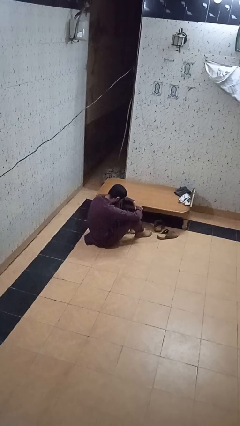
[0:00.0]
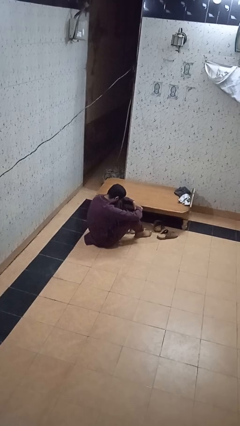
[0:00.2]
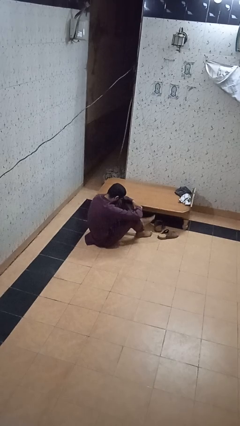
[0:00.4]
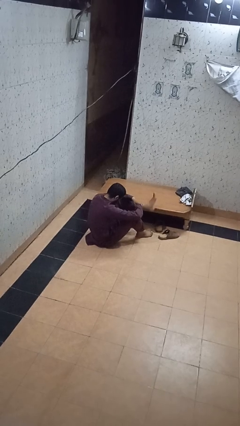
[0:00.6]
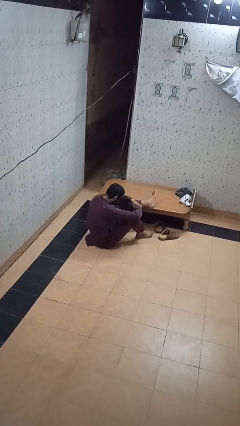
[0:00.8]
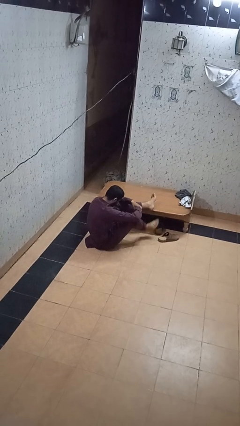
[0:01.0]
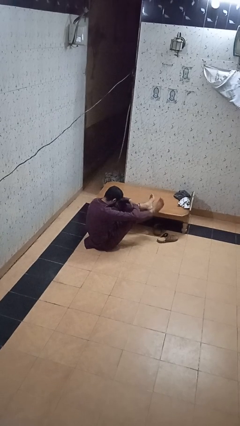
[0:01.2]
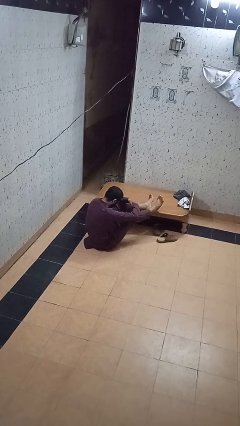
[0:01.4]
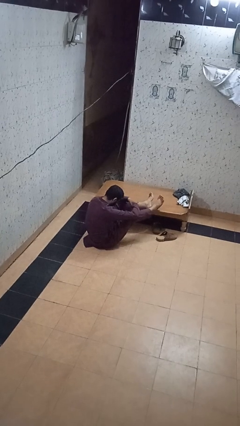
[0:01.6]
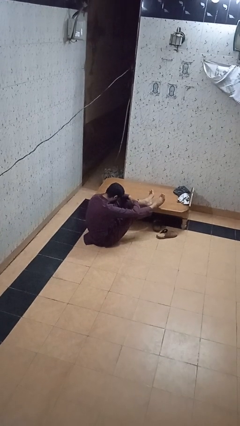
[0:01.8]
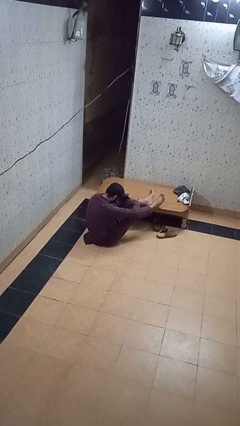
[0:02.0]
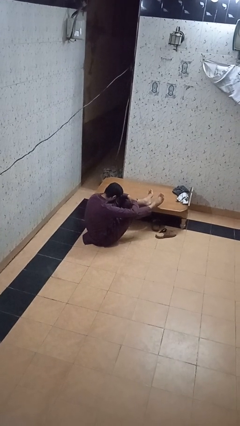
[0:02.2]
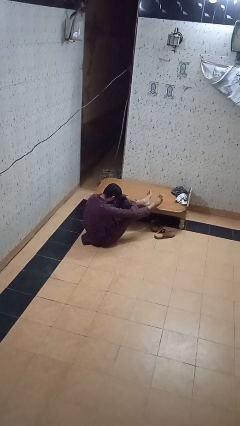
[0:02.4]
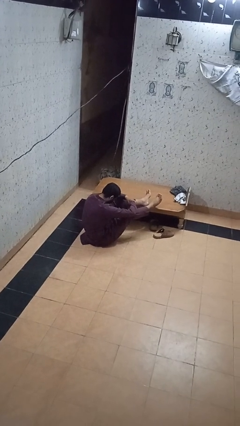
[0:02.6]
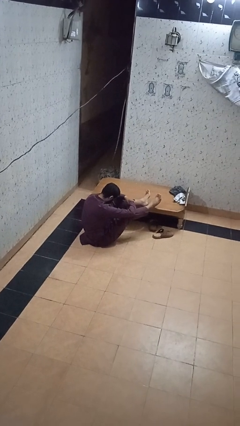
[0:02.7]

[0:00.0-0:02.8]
person puts feet up

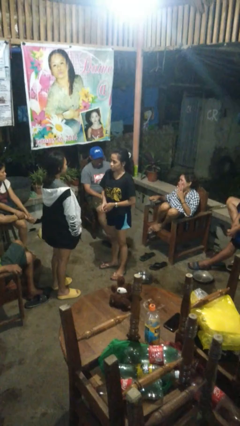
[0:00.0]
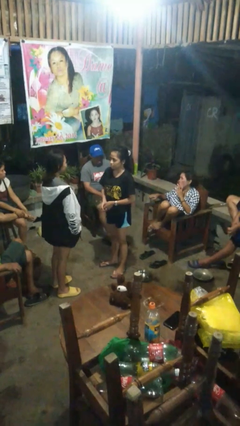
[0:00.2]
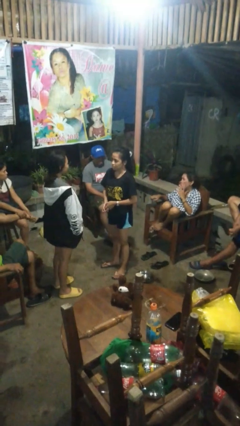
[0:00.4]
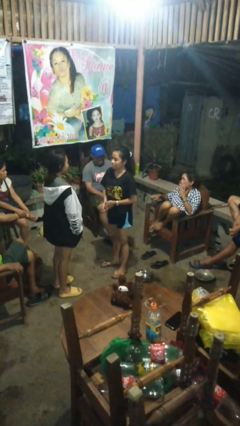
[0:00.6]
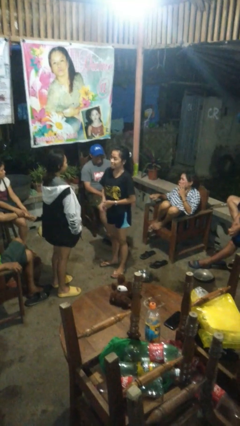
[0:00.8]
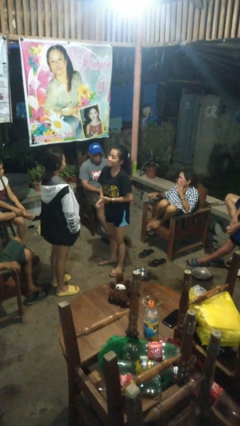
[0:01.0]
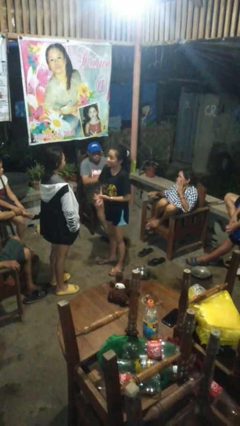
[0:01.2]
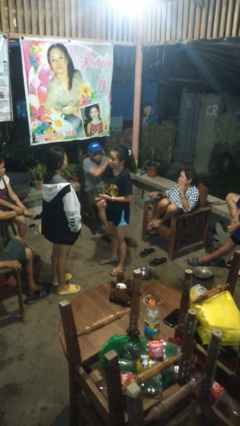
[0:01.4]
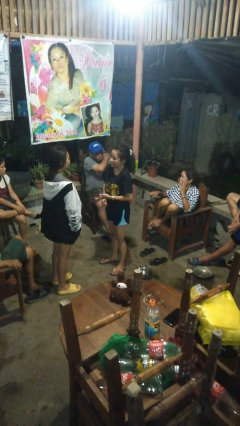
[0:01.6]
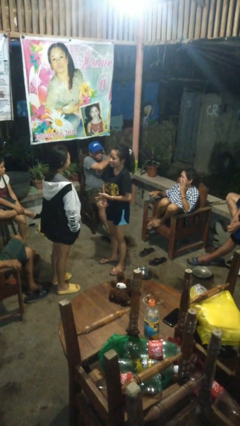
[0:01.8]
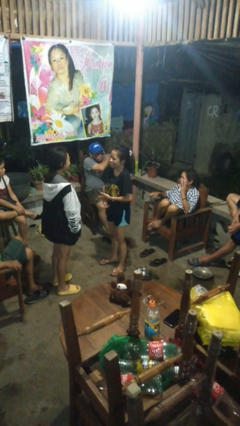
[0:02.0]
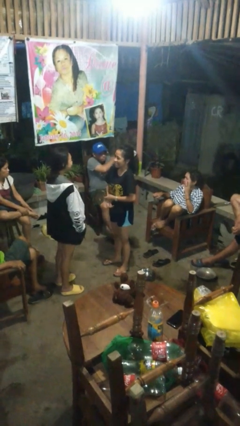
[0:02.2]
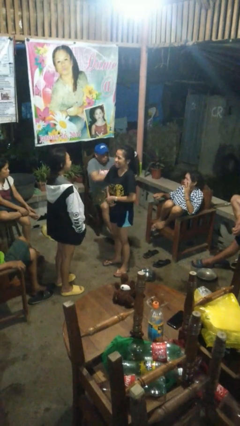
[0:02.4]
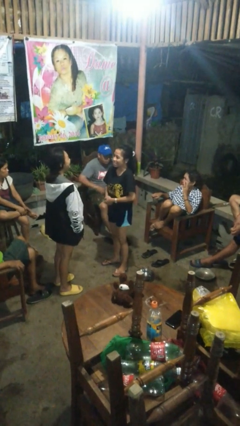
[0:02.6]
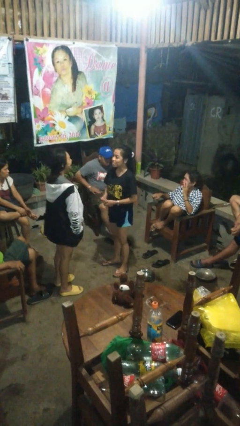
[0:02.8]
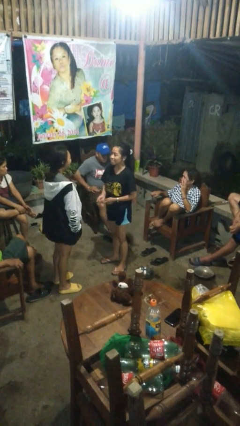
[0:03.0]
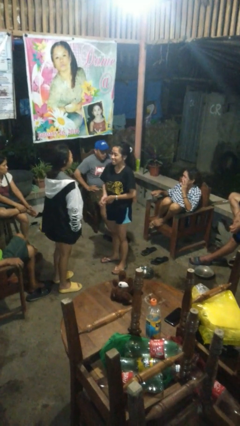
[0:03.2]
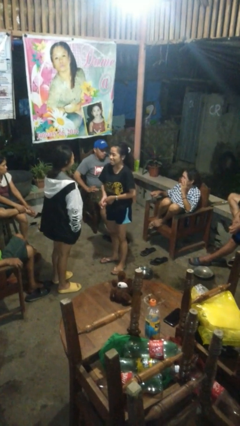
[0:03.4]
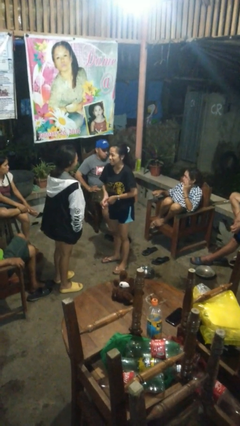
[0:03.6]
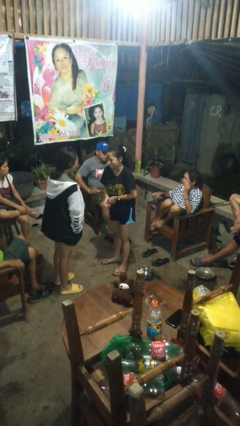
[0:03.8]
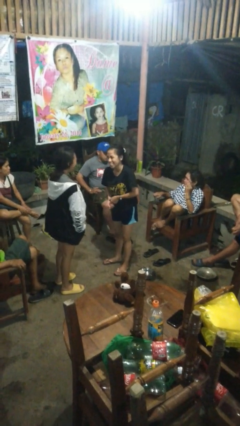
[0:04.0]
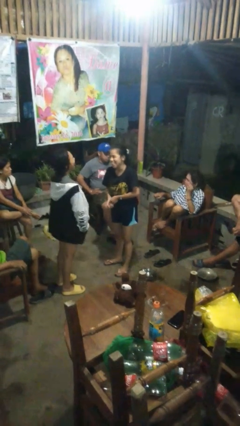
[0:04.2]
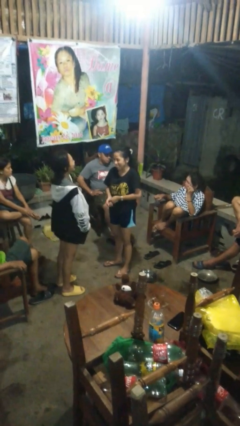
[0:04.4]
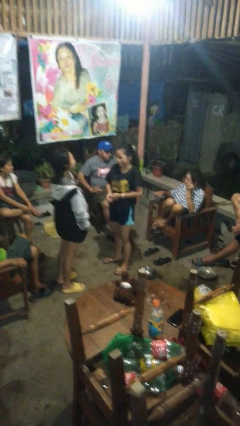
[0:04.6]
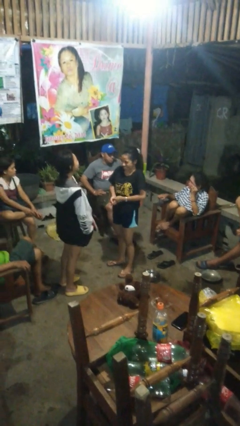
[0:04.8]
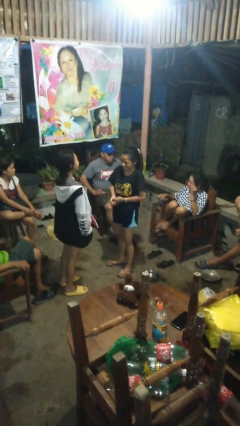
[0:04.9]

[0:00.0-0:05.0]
person laughs with person

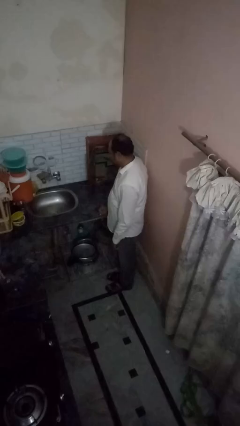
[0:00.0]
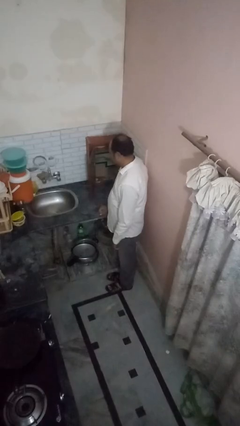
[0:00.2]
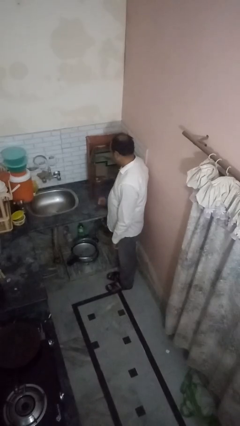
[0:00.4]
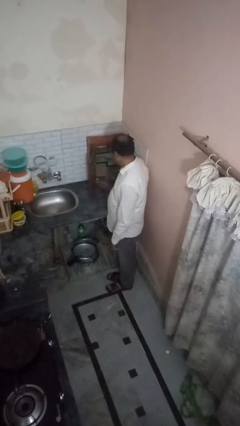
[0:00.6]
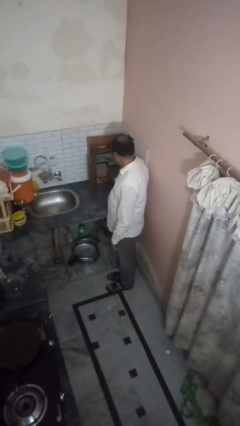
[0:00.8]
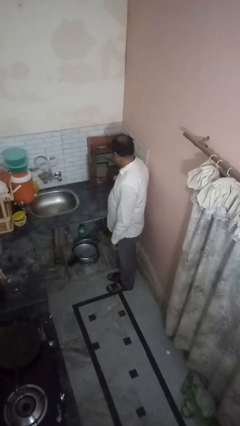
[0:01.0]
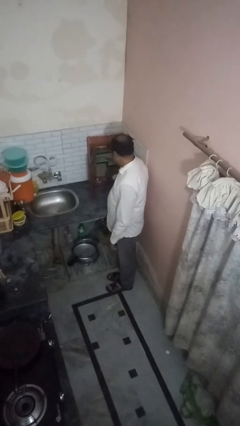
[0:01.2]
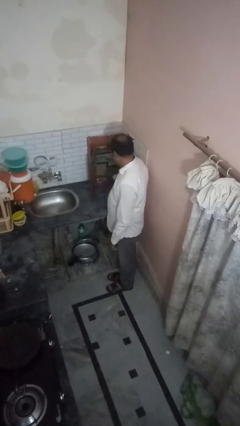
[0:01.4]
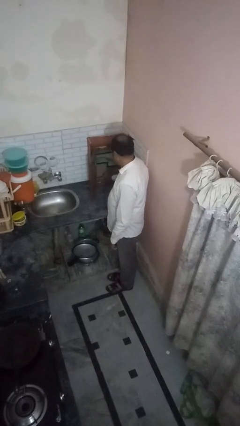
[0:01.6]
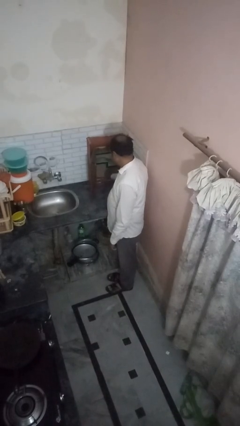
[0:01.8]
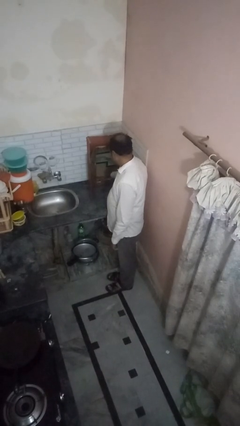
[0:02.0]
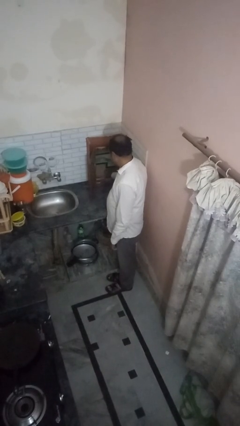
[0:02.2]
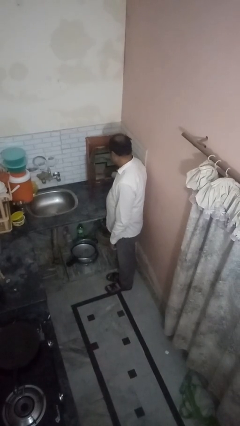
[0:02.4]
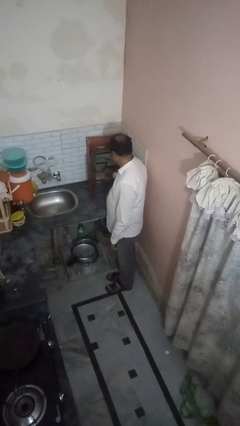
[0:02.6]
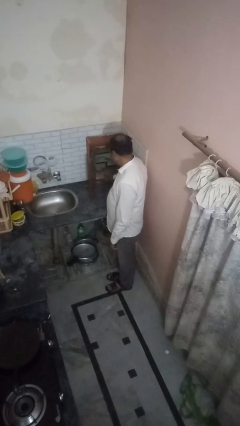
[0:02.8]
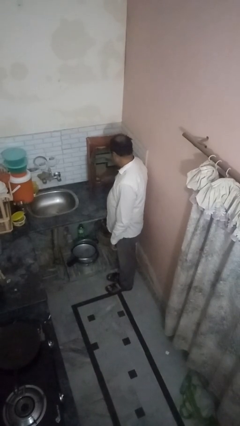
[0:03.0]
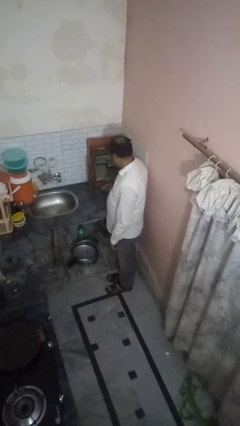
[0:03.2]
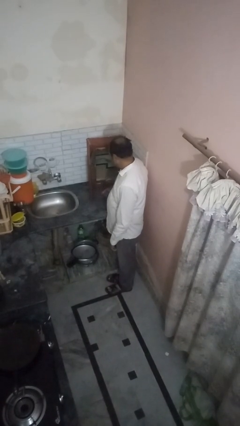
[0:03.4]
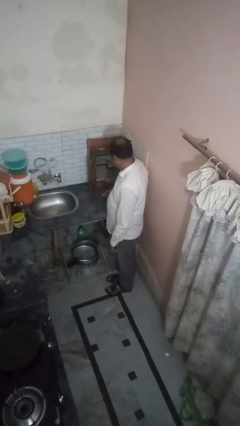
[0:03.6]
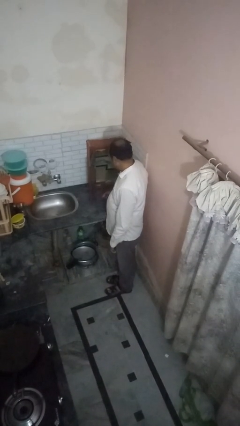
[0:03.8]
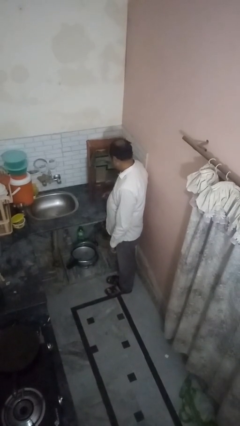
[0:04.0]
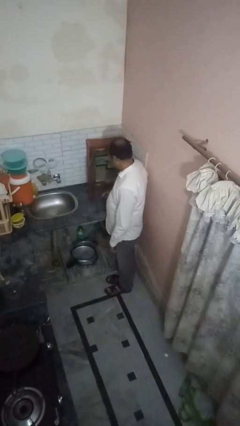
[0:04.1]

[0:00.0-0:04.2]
person takes object from kitchen drawer

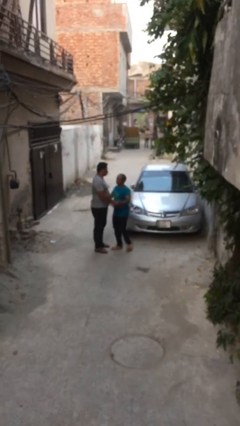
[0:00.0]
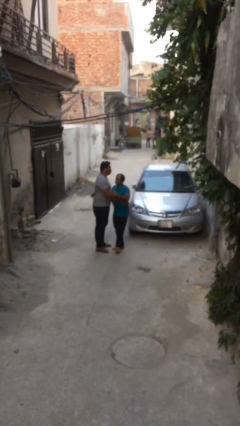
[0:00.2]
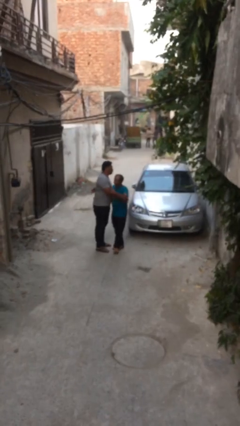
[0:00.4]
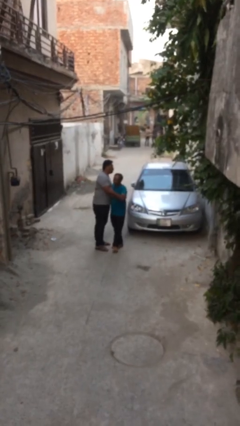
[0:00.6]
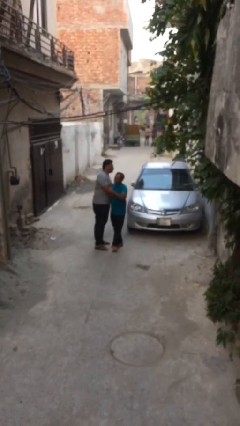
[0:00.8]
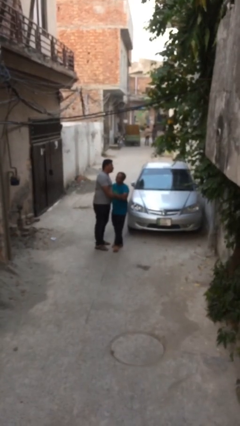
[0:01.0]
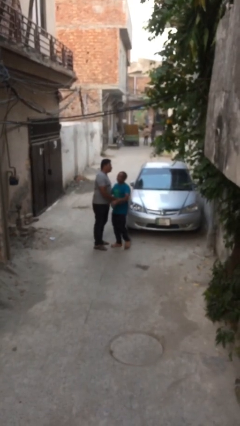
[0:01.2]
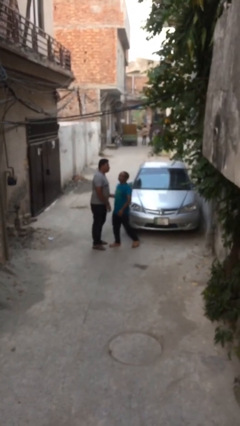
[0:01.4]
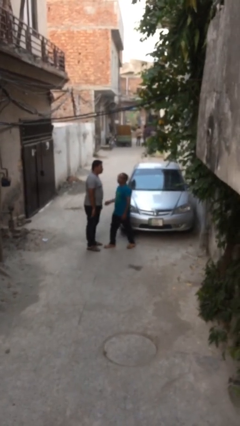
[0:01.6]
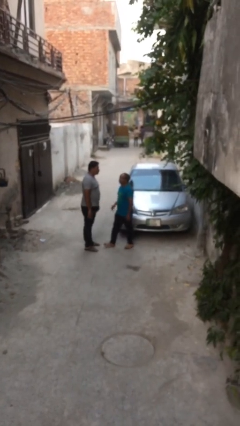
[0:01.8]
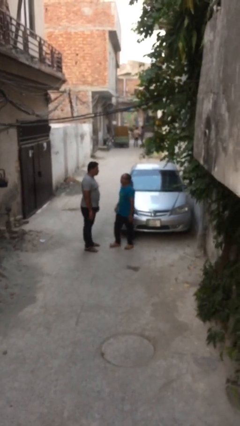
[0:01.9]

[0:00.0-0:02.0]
person embraces person

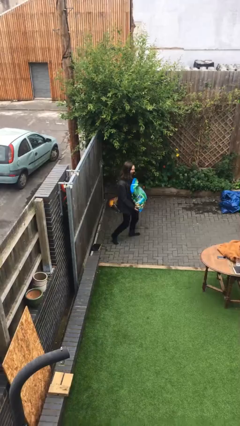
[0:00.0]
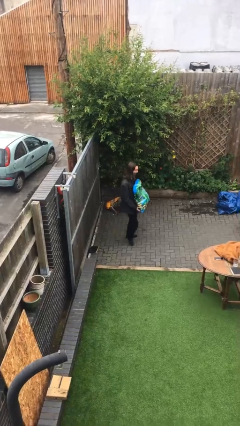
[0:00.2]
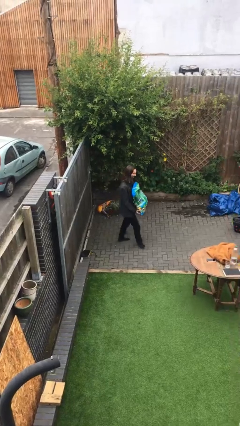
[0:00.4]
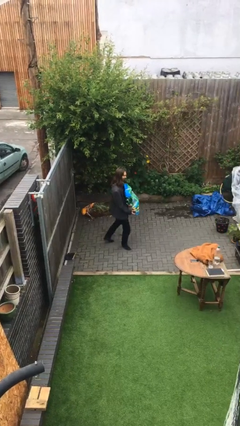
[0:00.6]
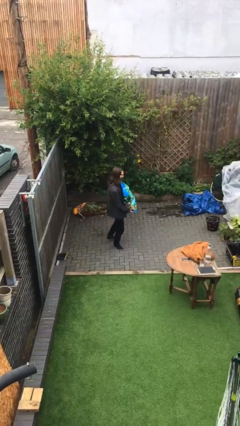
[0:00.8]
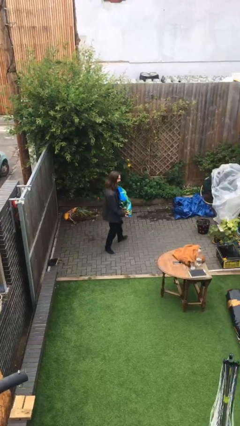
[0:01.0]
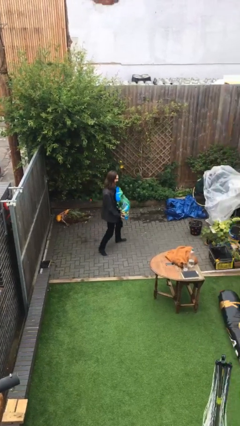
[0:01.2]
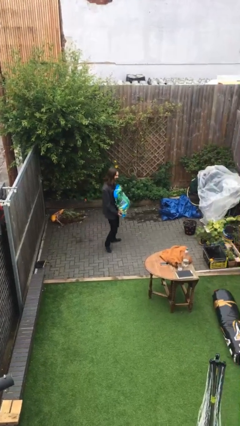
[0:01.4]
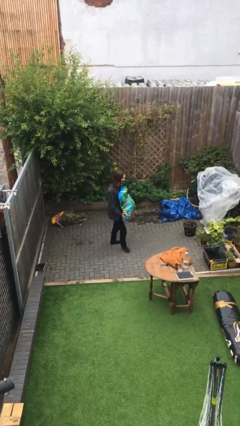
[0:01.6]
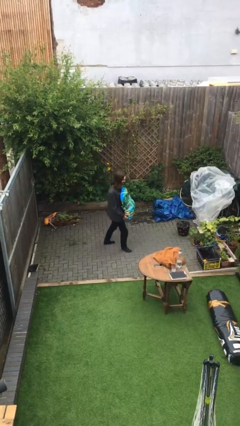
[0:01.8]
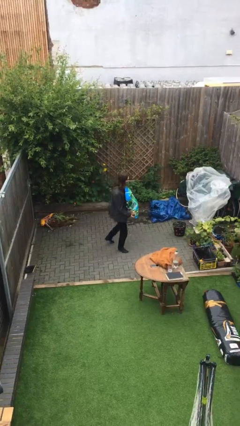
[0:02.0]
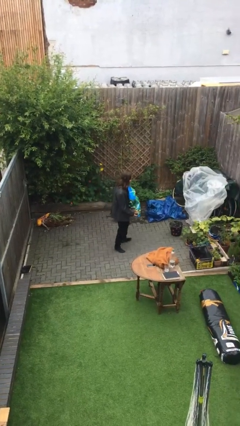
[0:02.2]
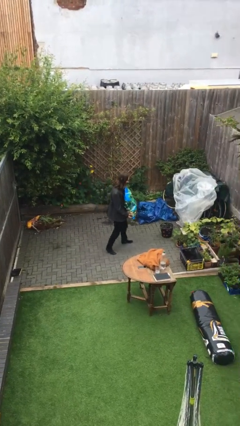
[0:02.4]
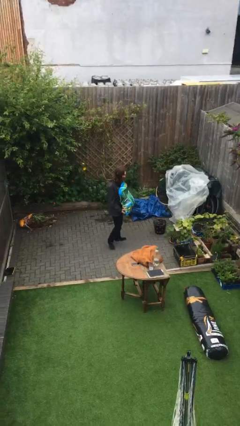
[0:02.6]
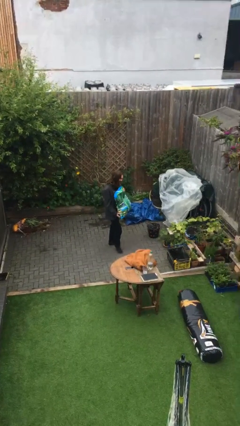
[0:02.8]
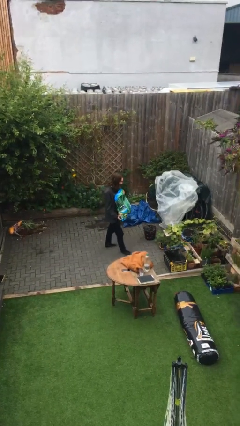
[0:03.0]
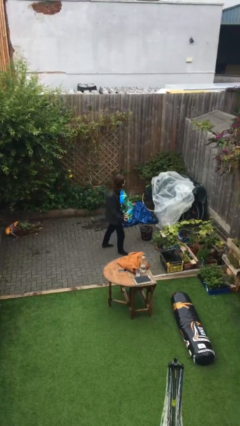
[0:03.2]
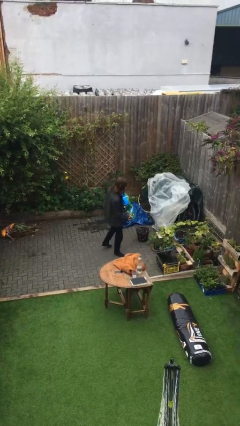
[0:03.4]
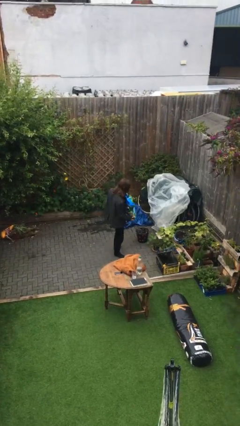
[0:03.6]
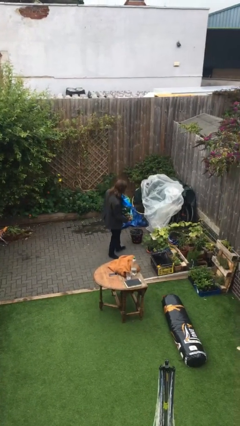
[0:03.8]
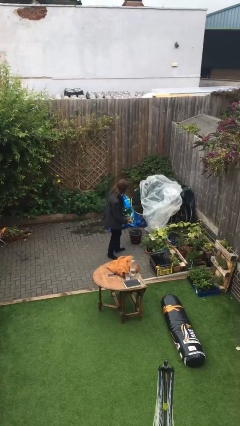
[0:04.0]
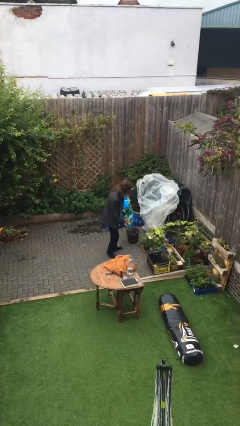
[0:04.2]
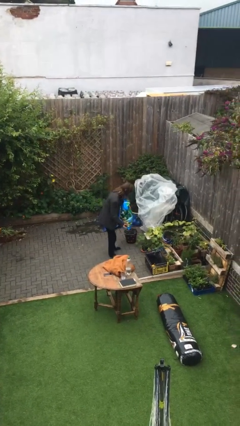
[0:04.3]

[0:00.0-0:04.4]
person carries heavy object
